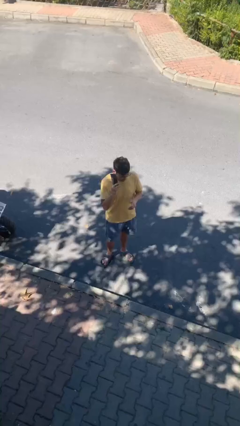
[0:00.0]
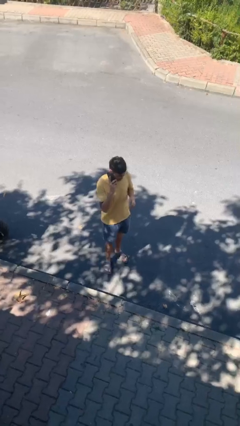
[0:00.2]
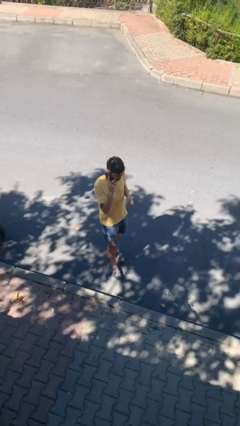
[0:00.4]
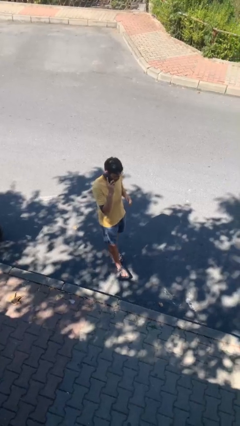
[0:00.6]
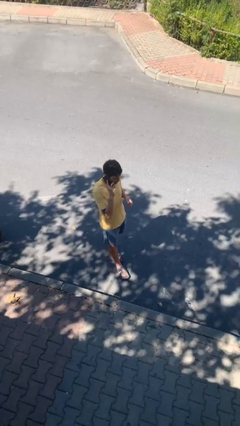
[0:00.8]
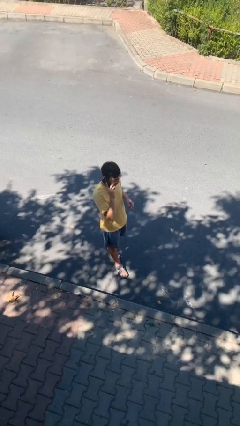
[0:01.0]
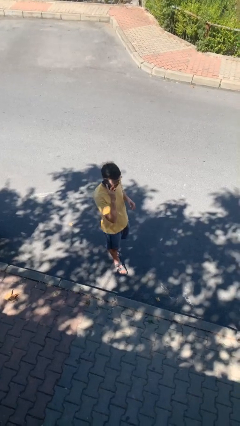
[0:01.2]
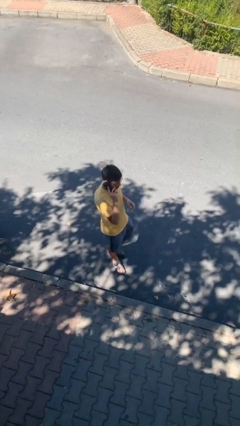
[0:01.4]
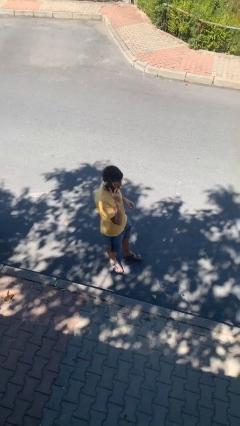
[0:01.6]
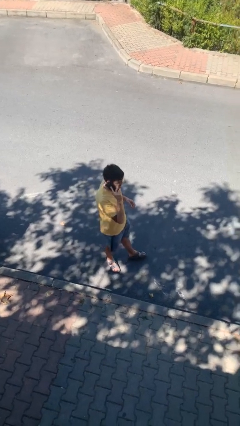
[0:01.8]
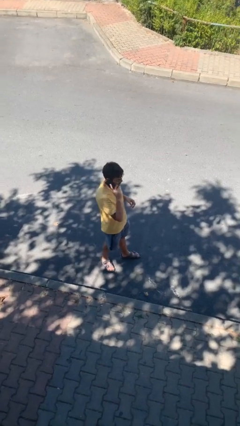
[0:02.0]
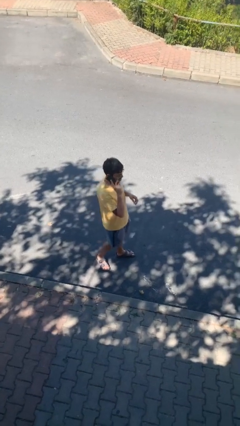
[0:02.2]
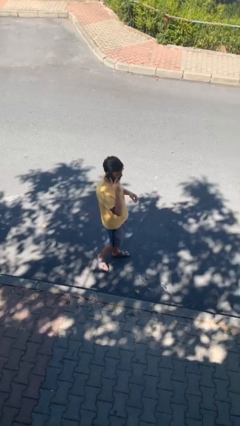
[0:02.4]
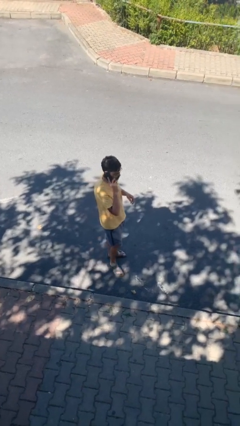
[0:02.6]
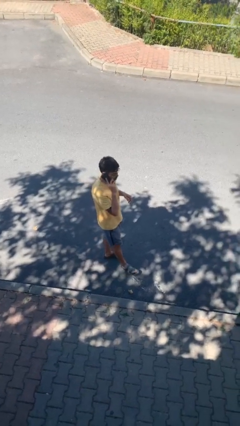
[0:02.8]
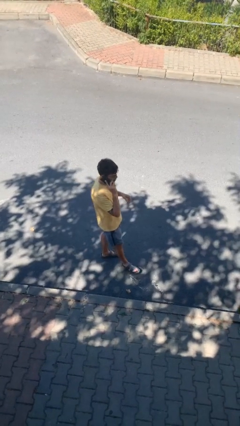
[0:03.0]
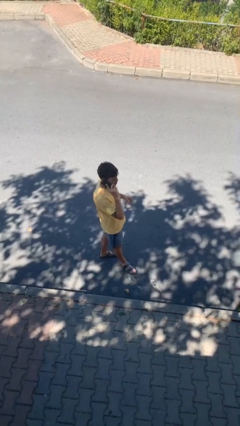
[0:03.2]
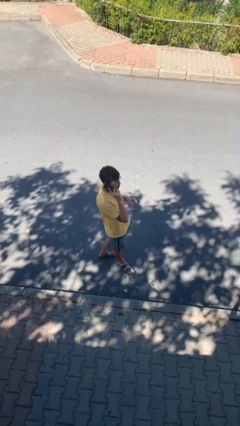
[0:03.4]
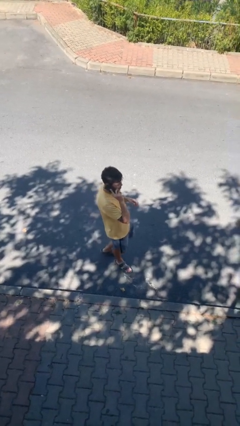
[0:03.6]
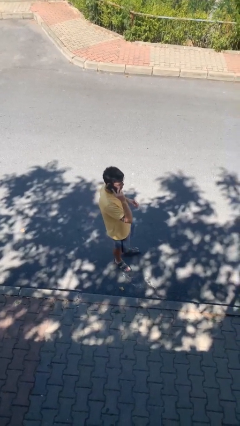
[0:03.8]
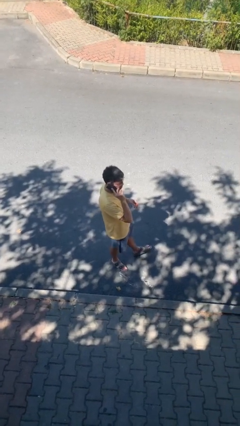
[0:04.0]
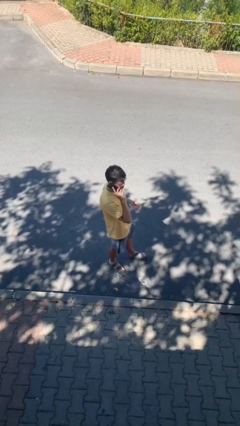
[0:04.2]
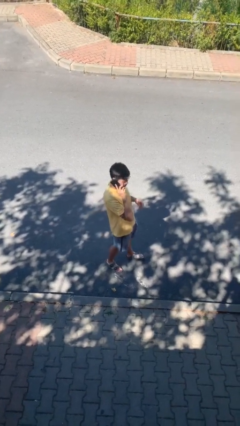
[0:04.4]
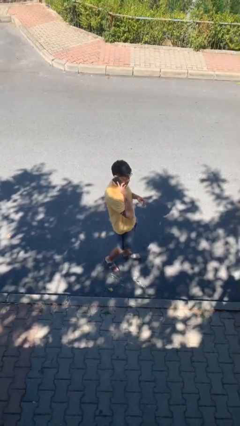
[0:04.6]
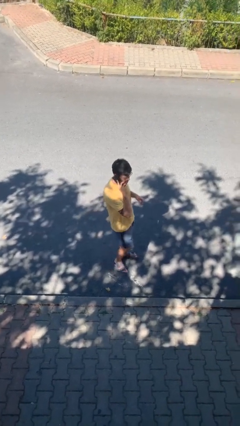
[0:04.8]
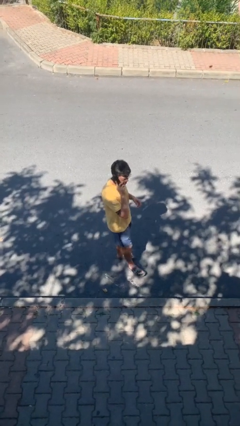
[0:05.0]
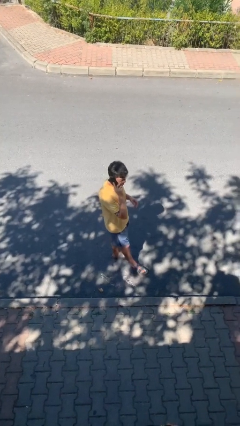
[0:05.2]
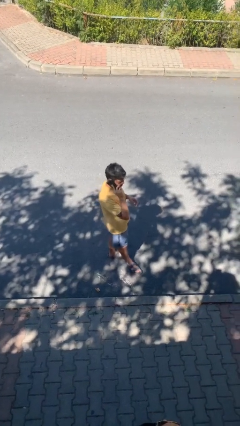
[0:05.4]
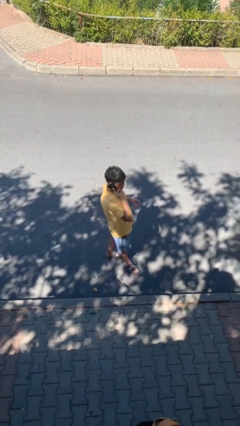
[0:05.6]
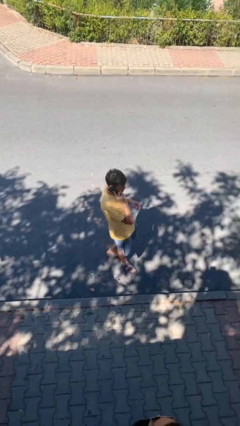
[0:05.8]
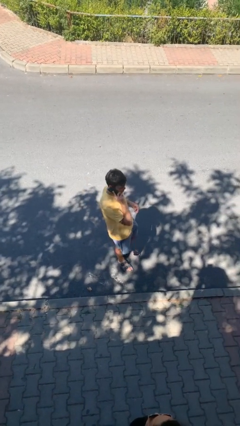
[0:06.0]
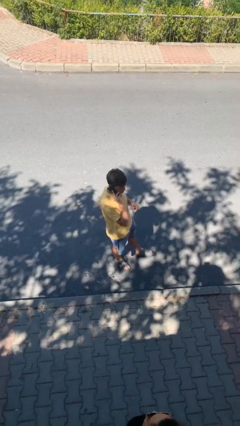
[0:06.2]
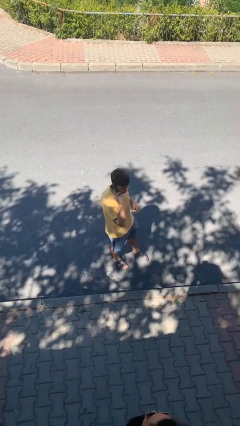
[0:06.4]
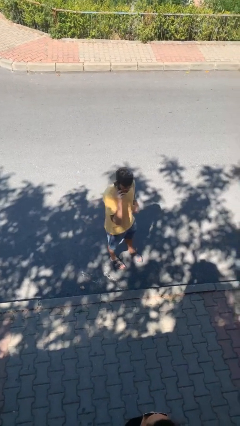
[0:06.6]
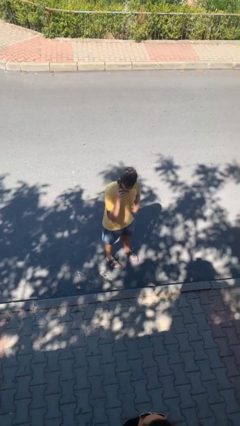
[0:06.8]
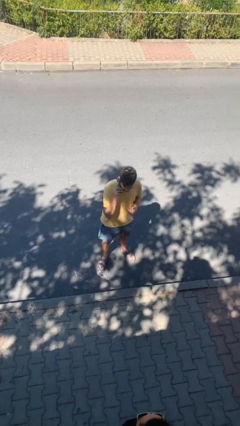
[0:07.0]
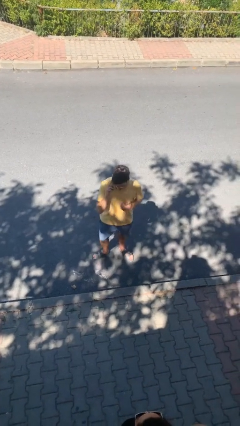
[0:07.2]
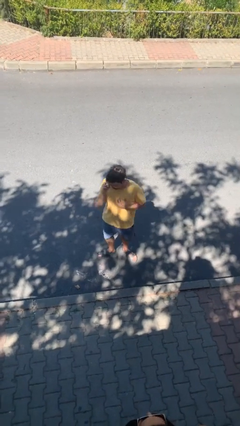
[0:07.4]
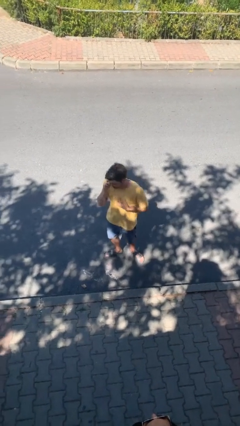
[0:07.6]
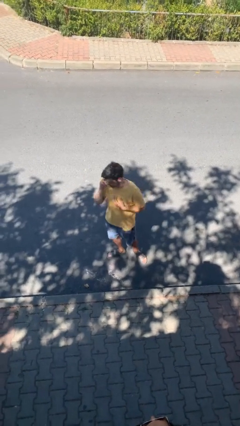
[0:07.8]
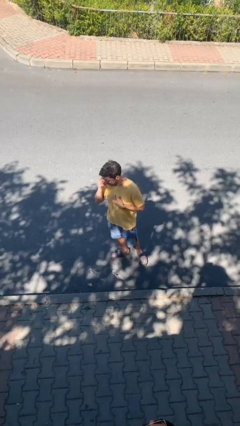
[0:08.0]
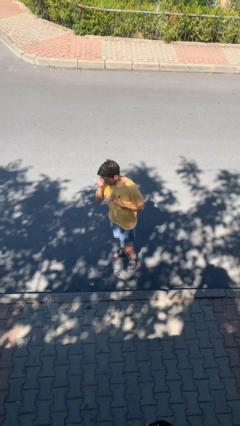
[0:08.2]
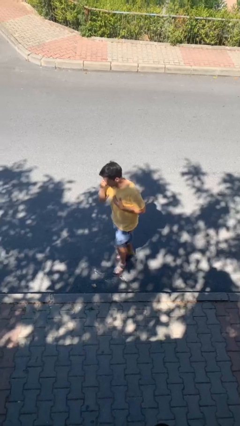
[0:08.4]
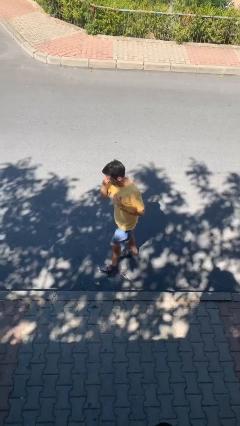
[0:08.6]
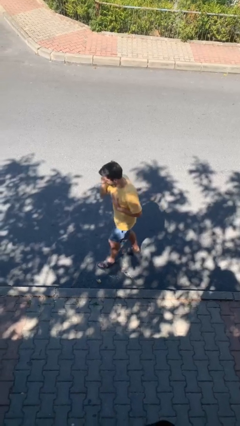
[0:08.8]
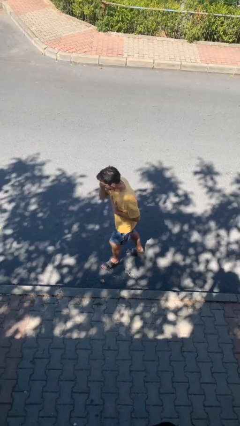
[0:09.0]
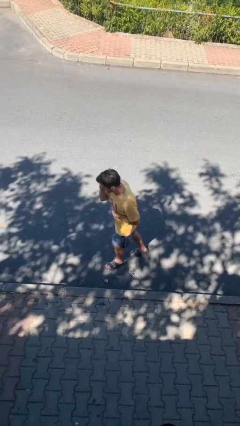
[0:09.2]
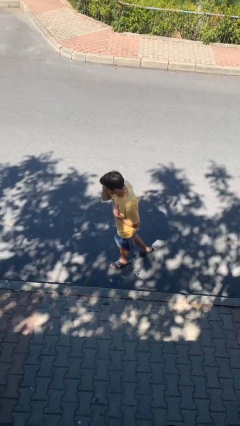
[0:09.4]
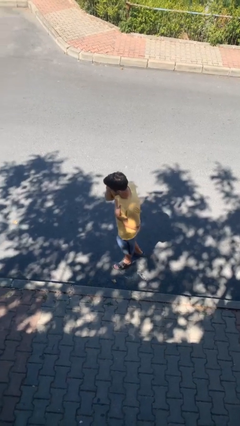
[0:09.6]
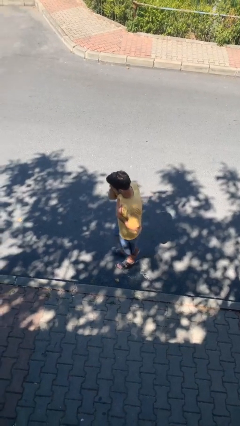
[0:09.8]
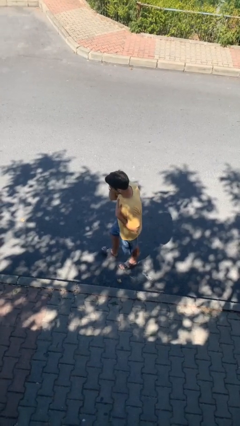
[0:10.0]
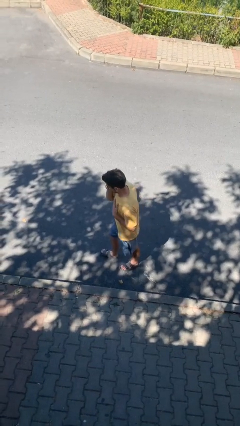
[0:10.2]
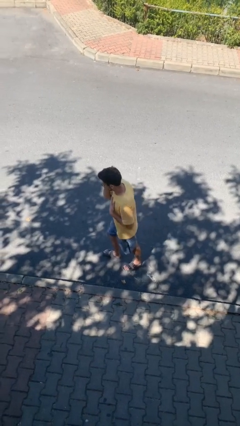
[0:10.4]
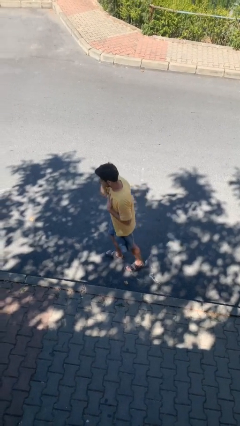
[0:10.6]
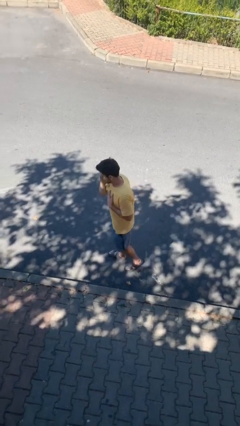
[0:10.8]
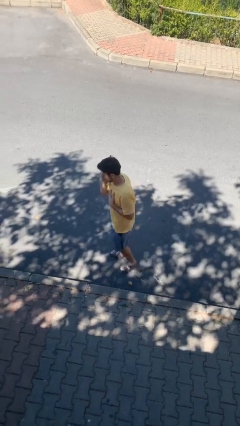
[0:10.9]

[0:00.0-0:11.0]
person talks on phone

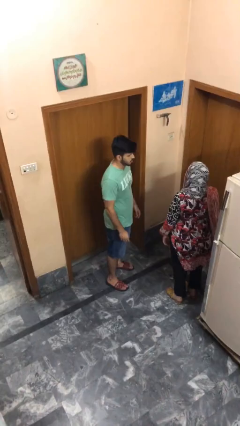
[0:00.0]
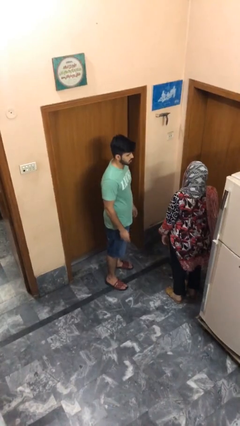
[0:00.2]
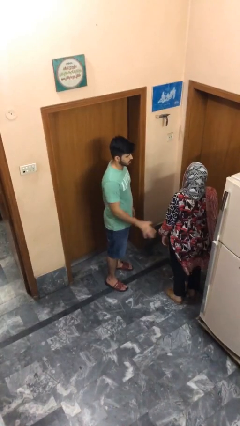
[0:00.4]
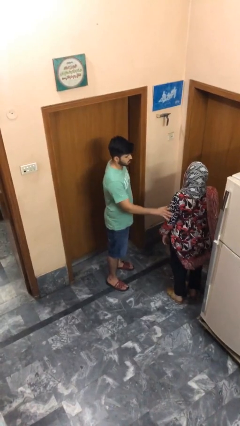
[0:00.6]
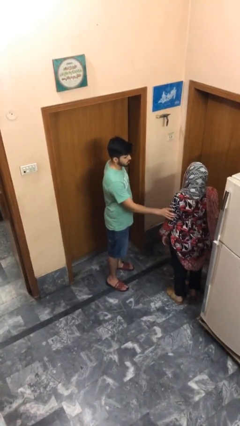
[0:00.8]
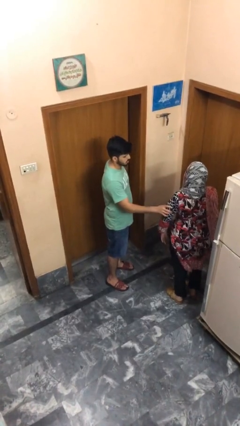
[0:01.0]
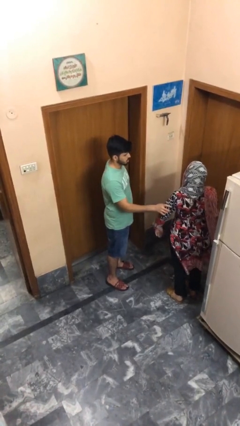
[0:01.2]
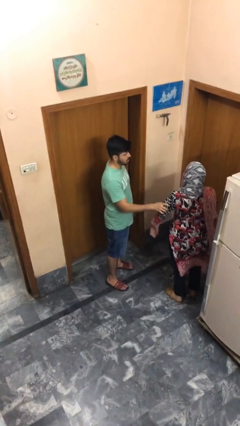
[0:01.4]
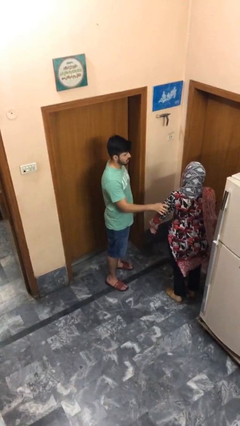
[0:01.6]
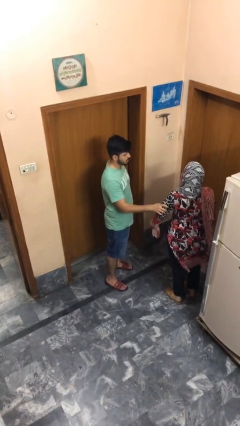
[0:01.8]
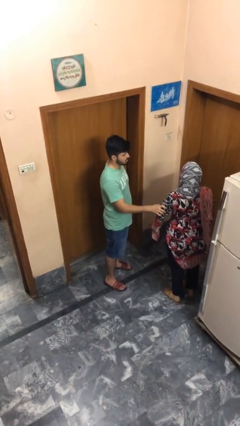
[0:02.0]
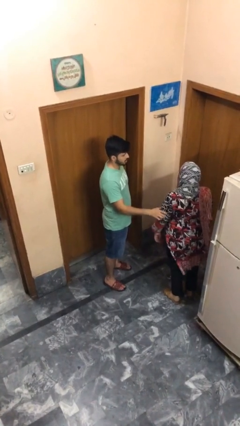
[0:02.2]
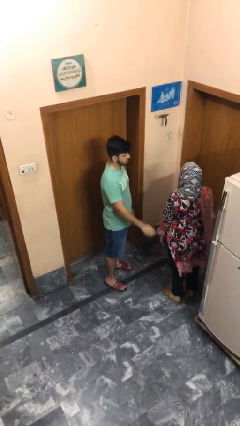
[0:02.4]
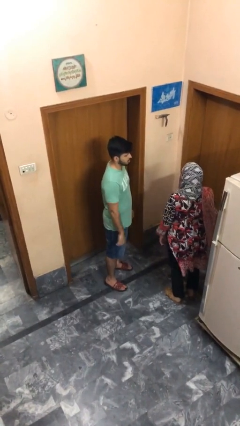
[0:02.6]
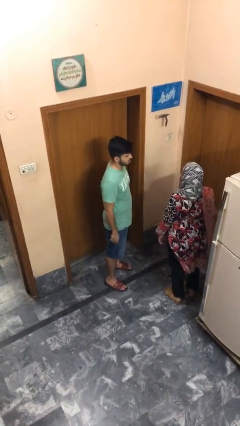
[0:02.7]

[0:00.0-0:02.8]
person grabs person by bicep

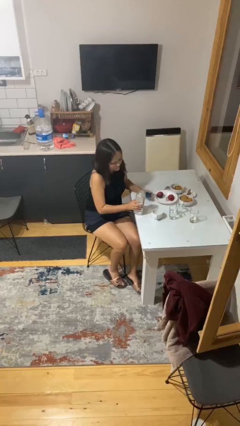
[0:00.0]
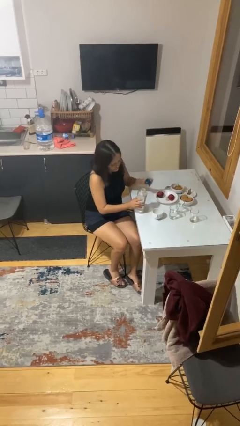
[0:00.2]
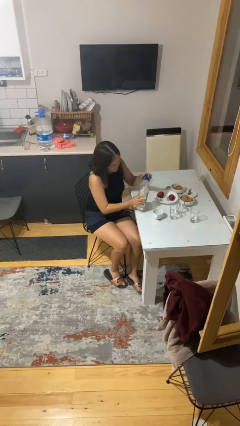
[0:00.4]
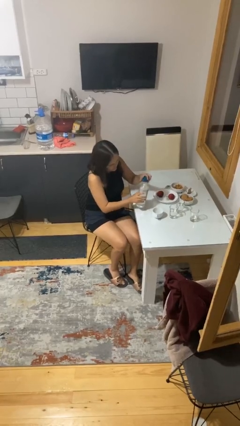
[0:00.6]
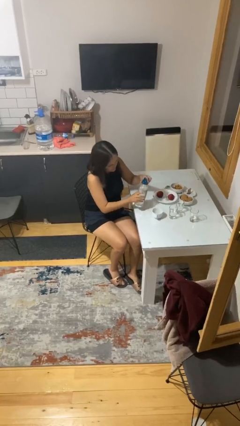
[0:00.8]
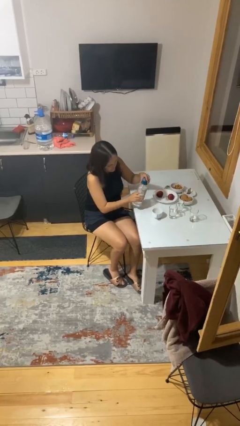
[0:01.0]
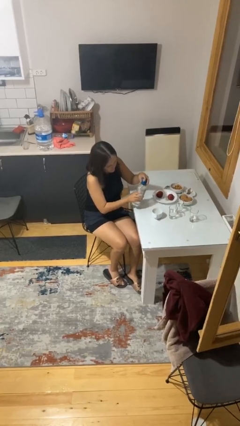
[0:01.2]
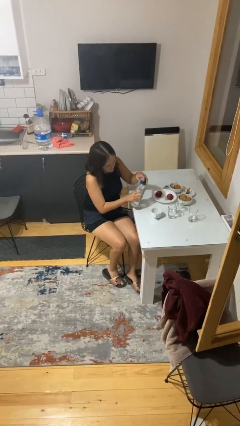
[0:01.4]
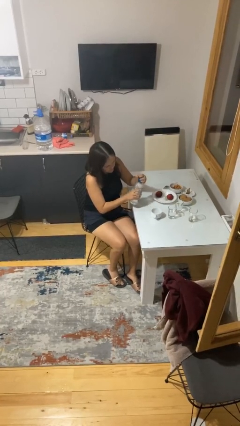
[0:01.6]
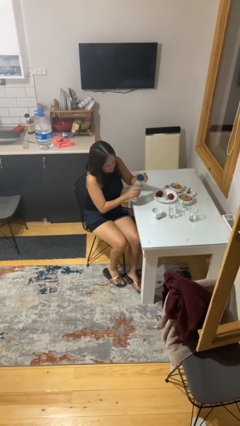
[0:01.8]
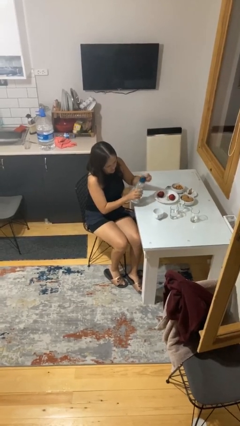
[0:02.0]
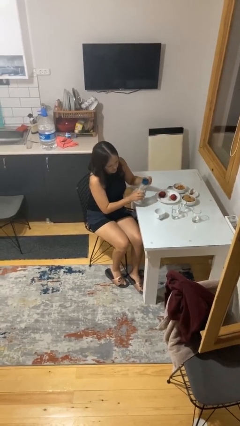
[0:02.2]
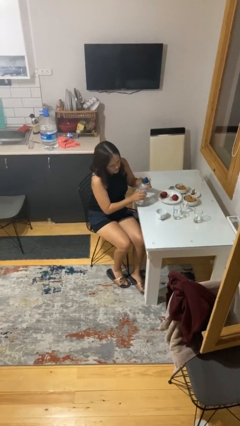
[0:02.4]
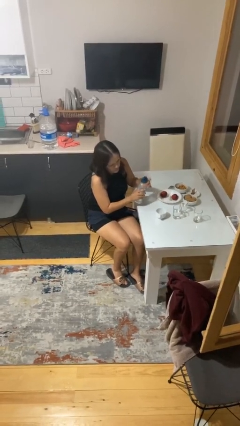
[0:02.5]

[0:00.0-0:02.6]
person screws lid to bottle

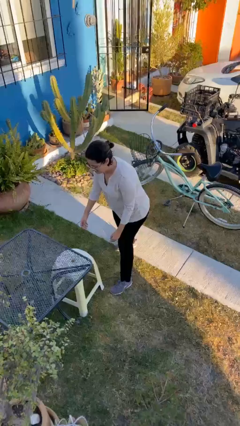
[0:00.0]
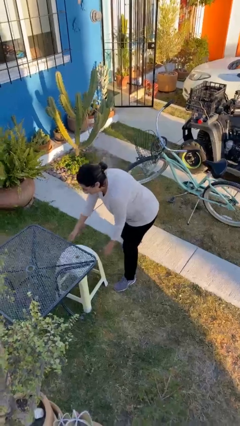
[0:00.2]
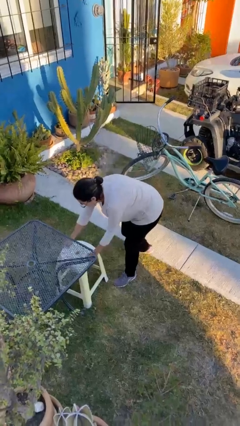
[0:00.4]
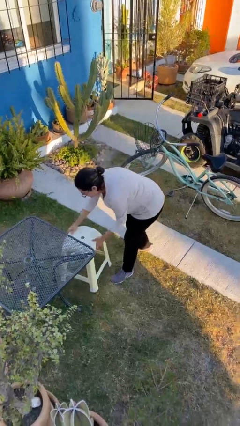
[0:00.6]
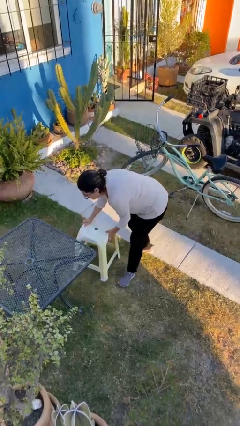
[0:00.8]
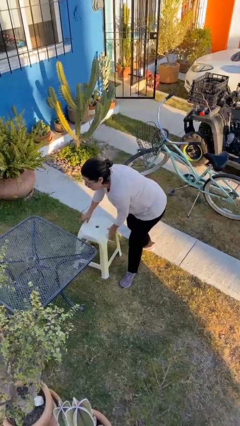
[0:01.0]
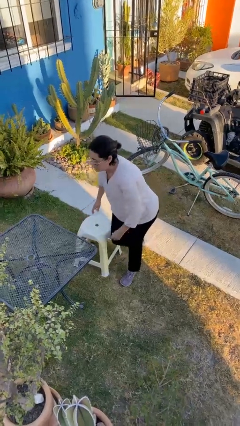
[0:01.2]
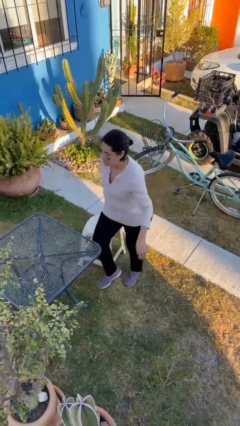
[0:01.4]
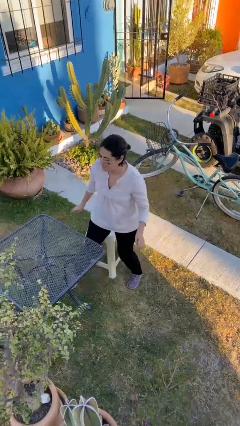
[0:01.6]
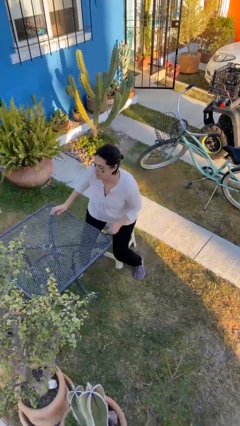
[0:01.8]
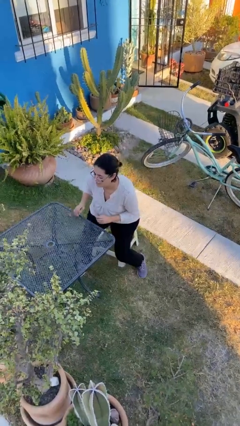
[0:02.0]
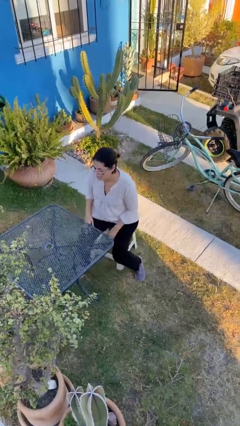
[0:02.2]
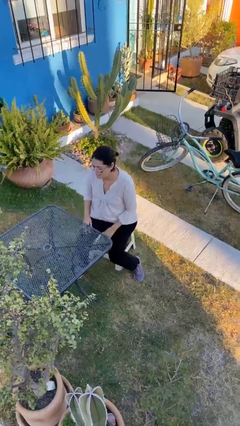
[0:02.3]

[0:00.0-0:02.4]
person sits down
